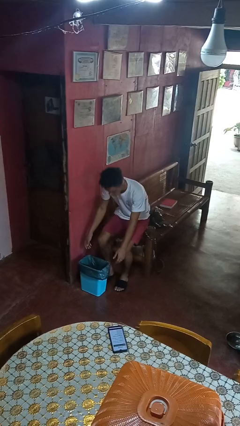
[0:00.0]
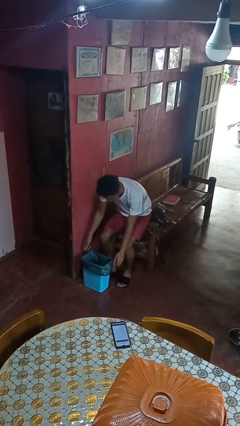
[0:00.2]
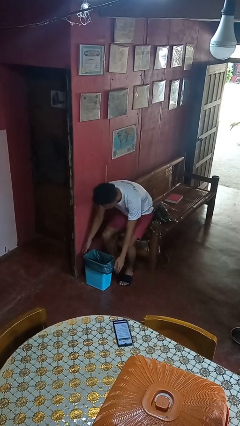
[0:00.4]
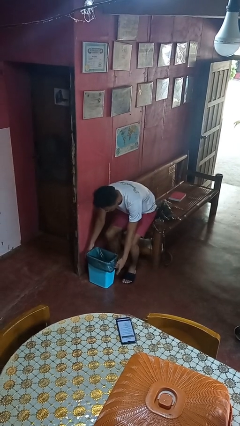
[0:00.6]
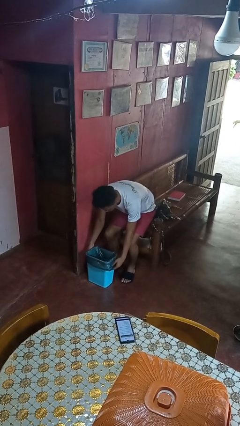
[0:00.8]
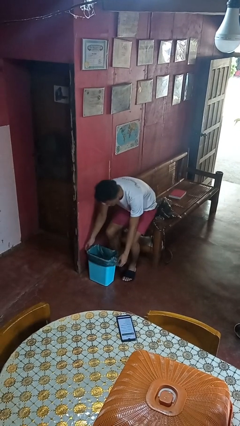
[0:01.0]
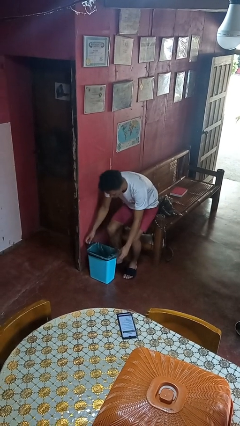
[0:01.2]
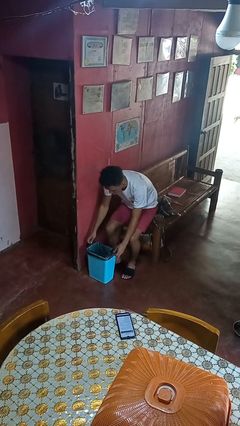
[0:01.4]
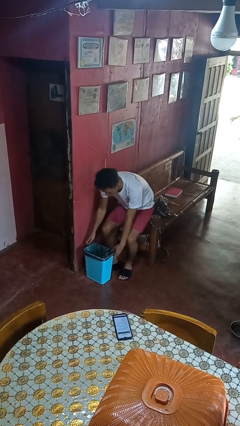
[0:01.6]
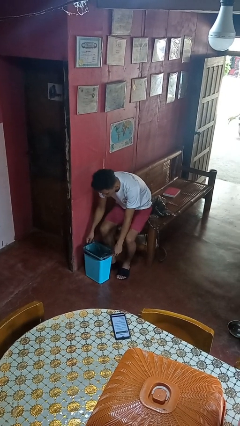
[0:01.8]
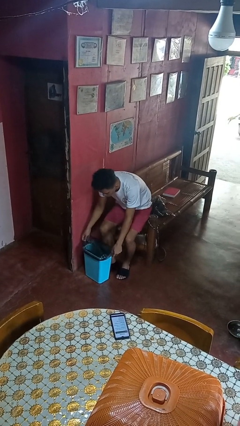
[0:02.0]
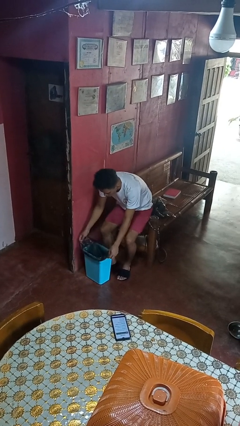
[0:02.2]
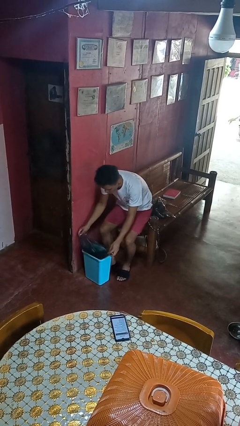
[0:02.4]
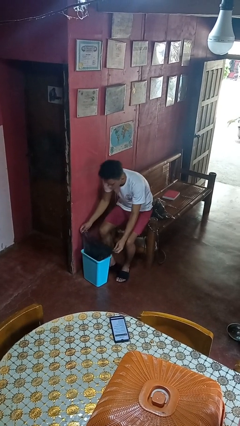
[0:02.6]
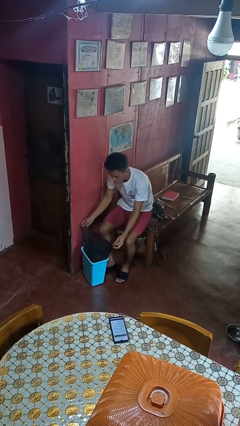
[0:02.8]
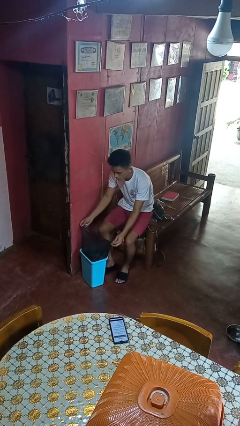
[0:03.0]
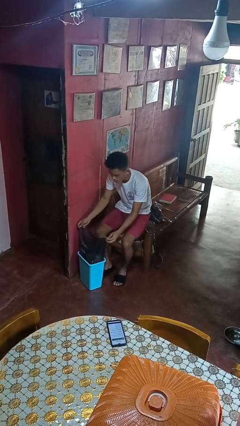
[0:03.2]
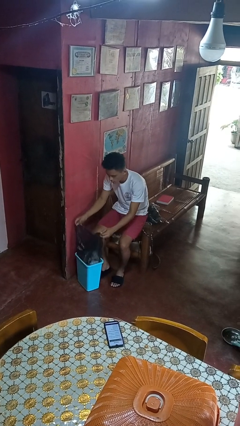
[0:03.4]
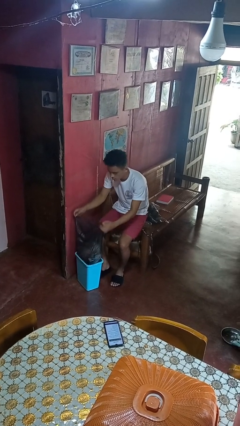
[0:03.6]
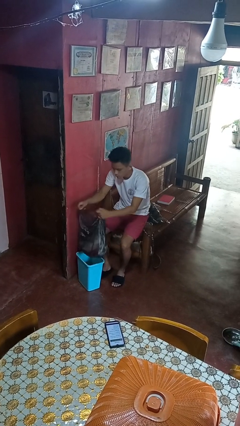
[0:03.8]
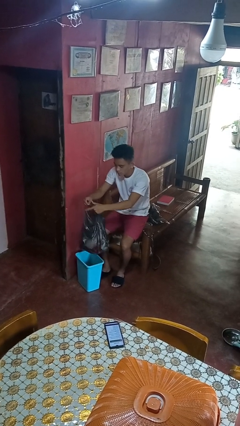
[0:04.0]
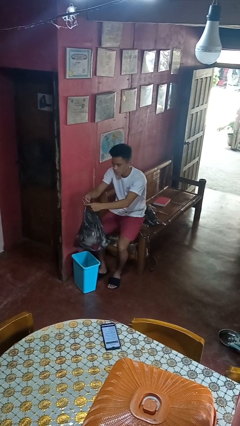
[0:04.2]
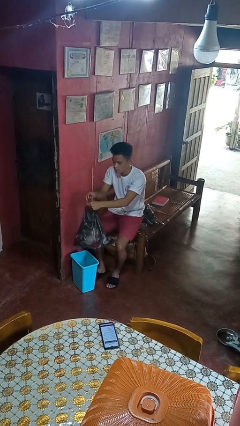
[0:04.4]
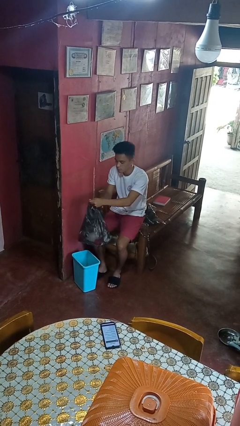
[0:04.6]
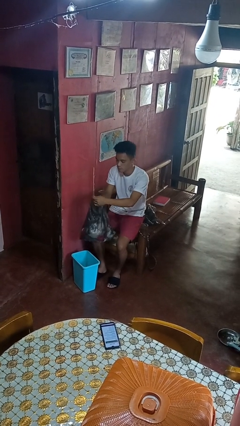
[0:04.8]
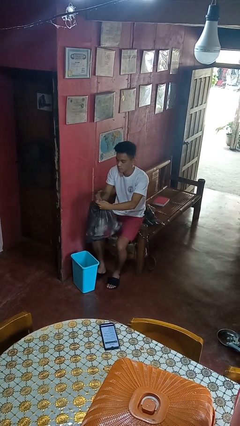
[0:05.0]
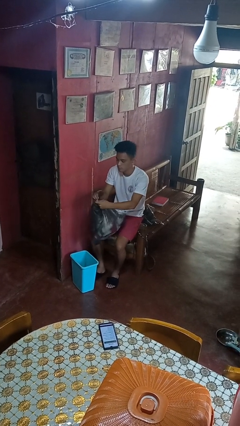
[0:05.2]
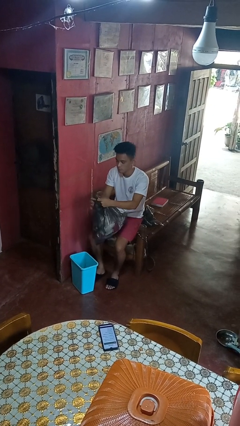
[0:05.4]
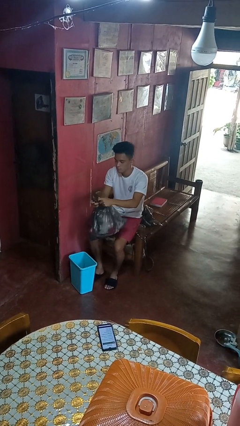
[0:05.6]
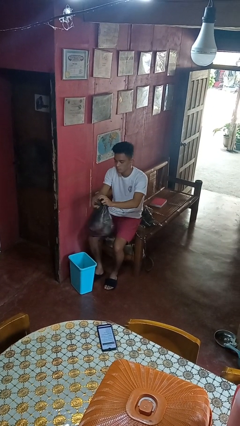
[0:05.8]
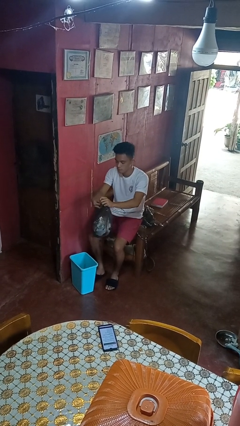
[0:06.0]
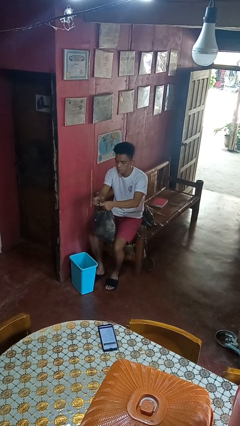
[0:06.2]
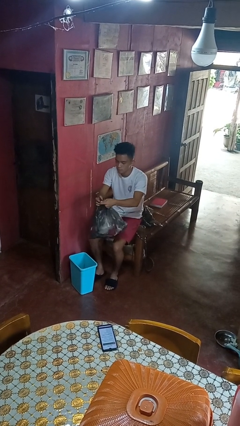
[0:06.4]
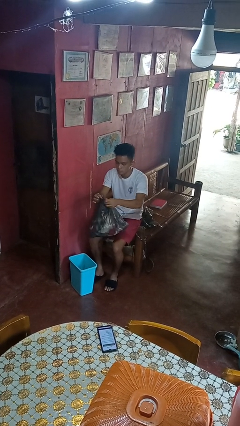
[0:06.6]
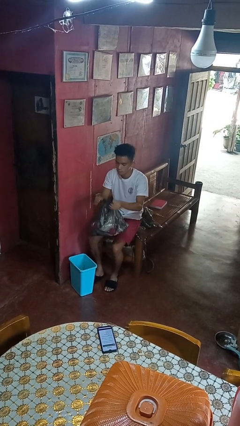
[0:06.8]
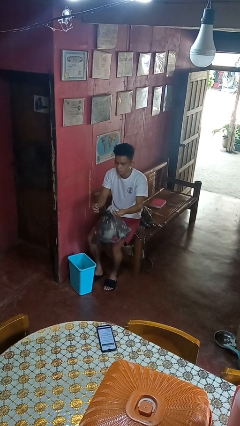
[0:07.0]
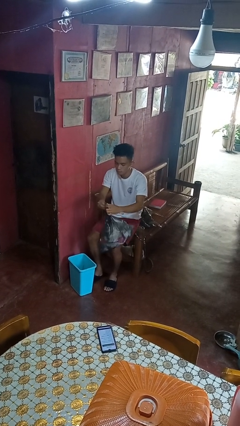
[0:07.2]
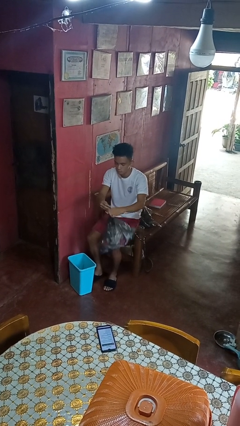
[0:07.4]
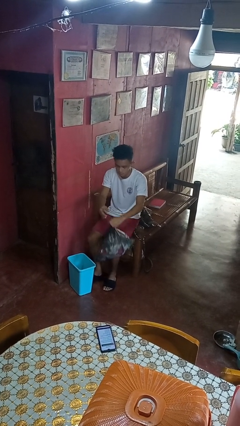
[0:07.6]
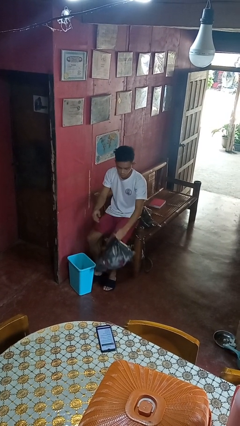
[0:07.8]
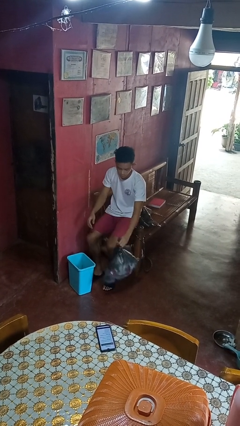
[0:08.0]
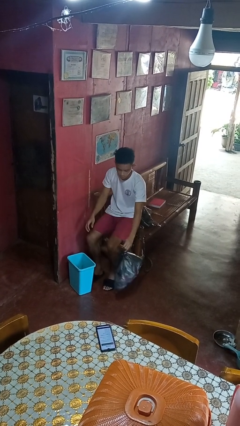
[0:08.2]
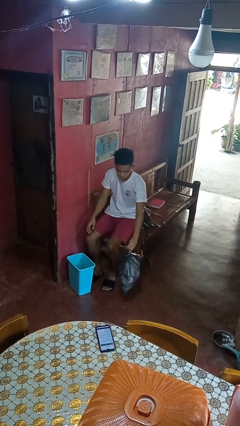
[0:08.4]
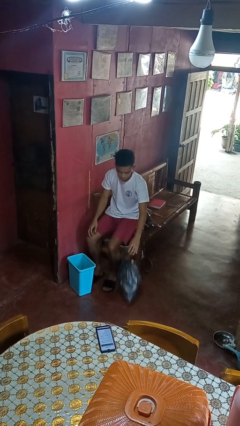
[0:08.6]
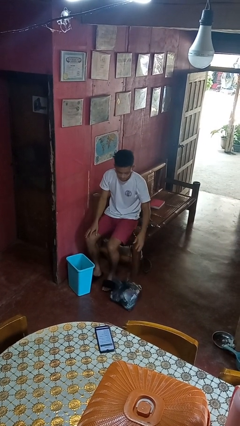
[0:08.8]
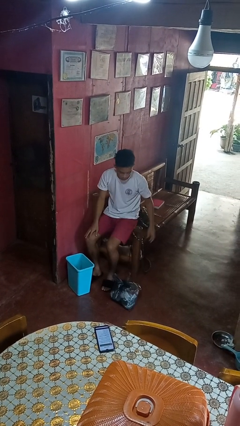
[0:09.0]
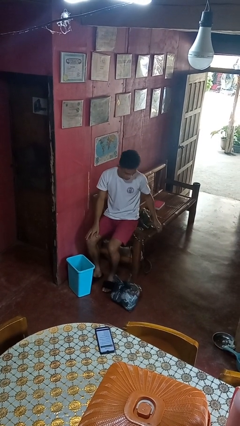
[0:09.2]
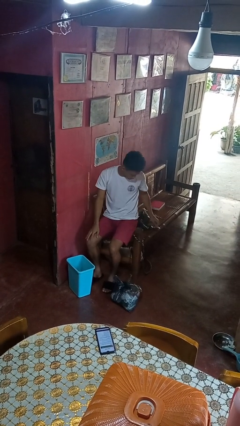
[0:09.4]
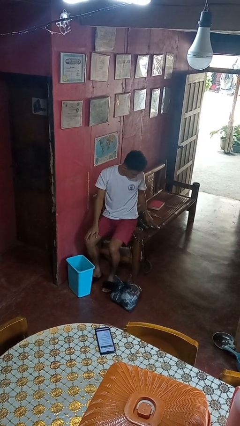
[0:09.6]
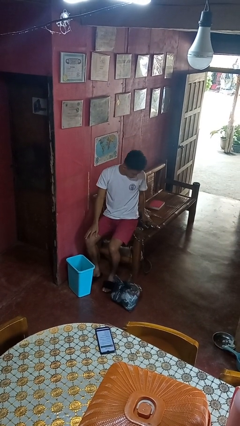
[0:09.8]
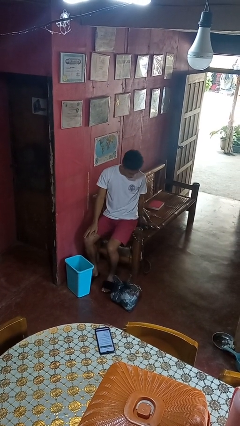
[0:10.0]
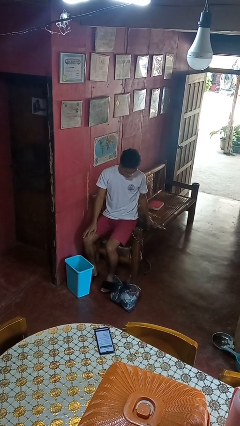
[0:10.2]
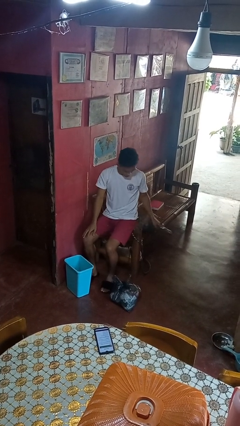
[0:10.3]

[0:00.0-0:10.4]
person removes trashbag from trashcan

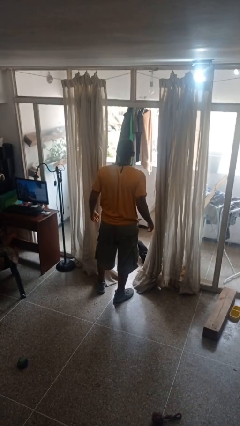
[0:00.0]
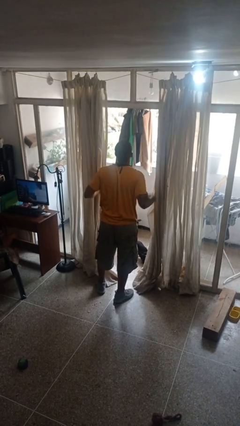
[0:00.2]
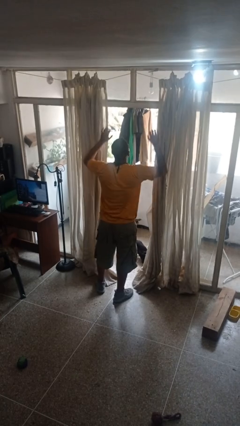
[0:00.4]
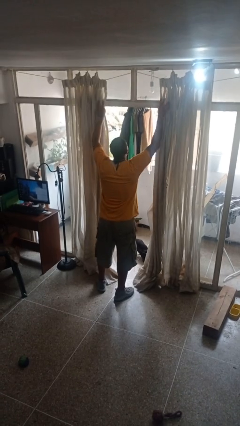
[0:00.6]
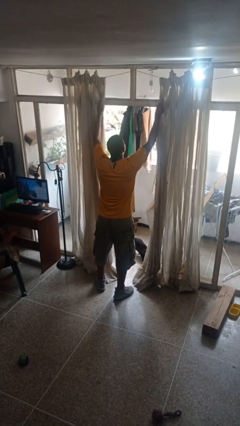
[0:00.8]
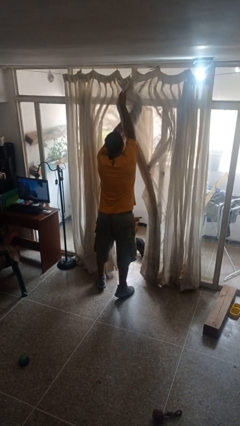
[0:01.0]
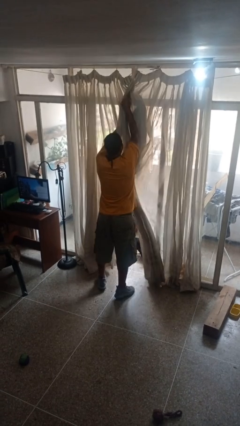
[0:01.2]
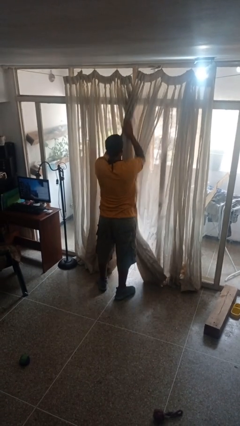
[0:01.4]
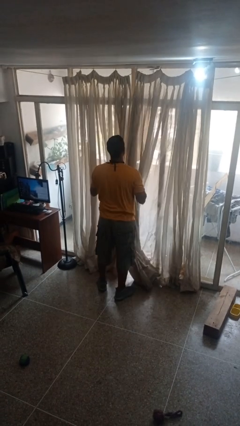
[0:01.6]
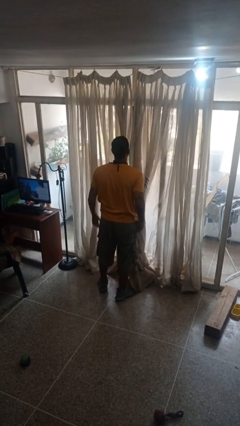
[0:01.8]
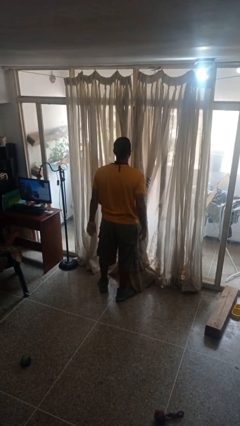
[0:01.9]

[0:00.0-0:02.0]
person closes curtains

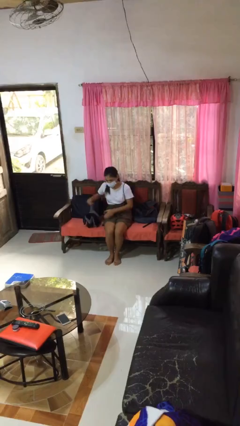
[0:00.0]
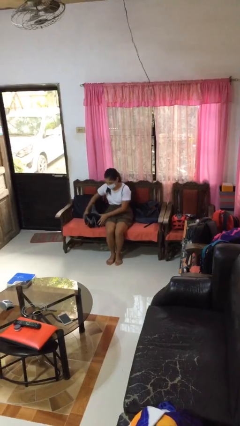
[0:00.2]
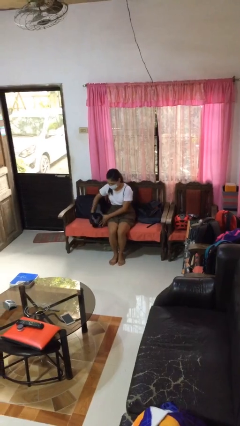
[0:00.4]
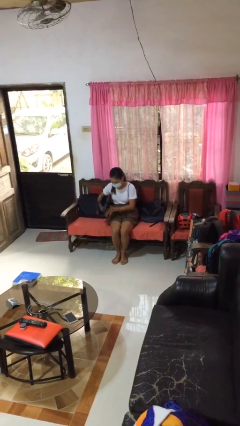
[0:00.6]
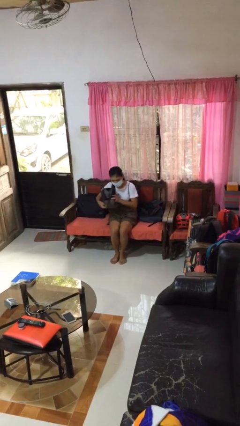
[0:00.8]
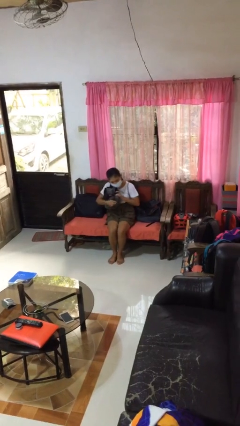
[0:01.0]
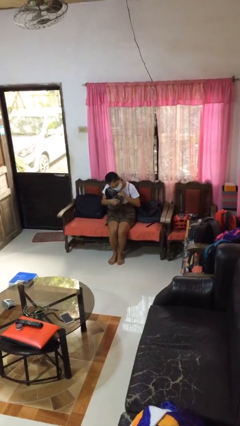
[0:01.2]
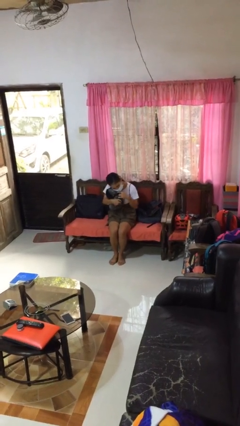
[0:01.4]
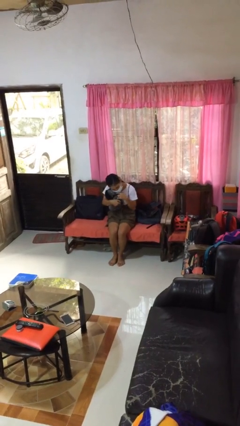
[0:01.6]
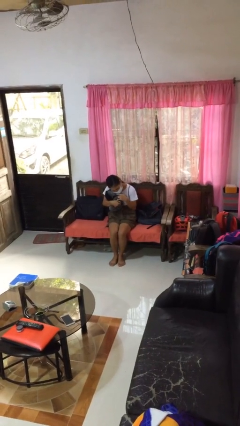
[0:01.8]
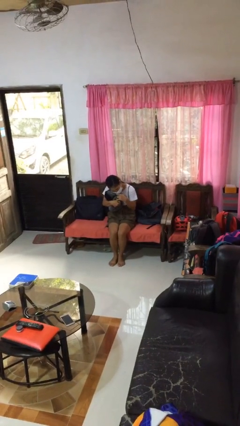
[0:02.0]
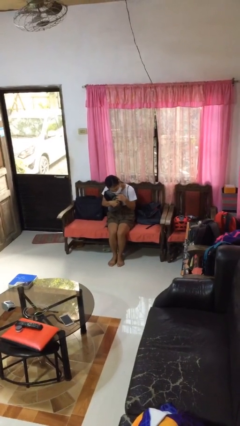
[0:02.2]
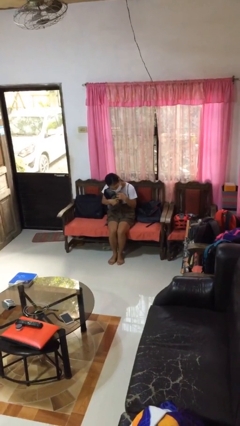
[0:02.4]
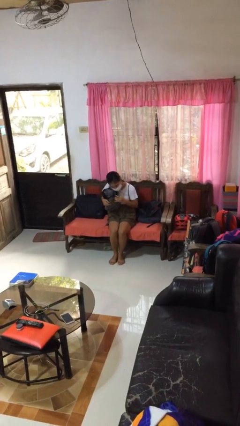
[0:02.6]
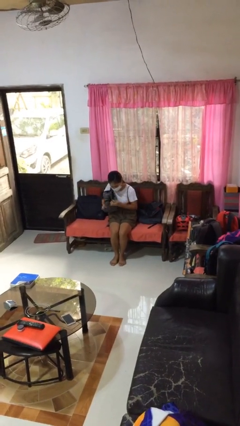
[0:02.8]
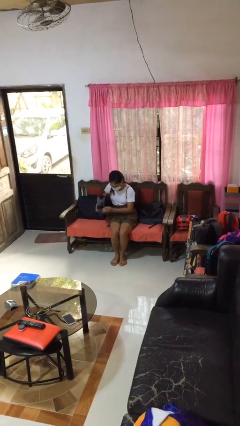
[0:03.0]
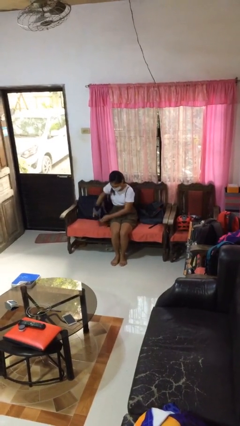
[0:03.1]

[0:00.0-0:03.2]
person hugs stuffed animal

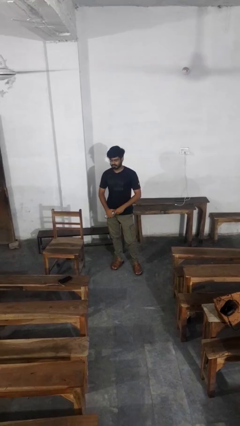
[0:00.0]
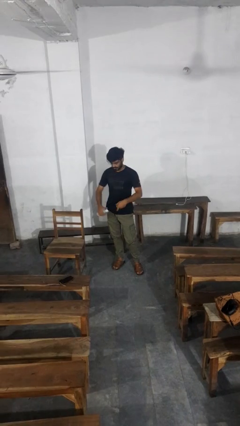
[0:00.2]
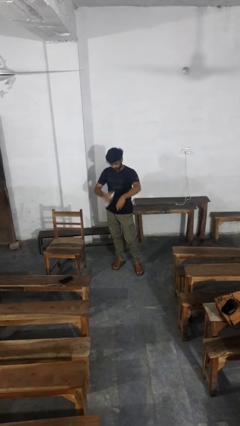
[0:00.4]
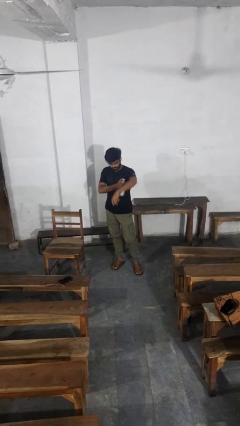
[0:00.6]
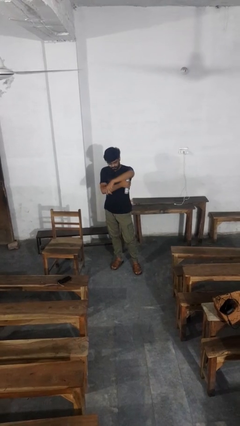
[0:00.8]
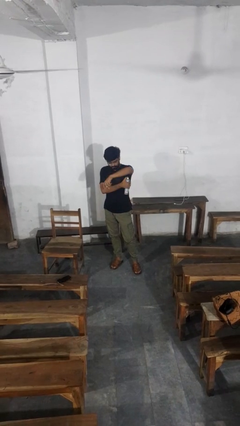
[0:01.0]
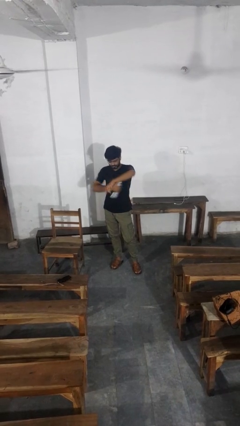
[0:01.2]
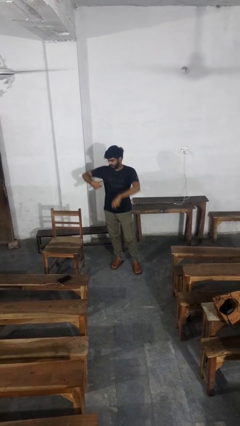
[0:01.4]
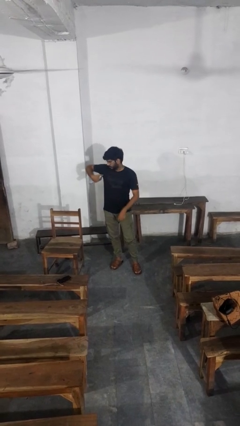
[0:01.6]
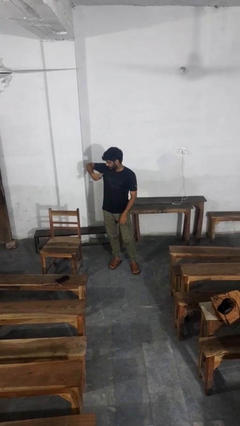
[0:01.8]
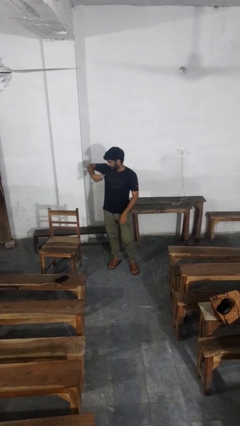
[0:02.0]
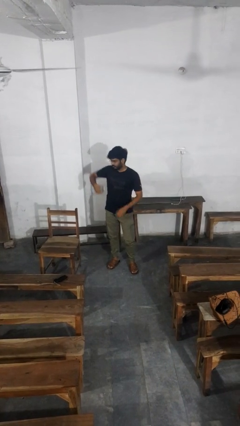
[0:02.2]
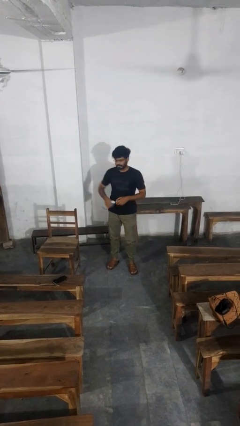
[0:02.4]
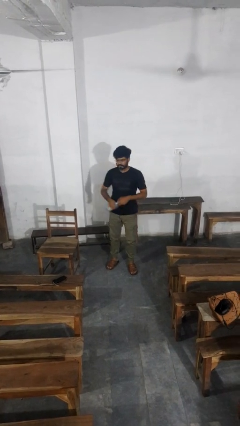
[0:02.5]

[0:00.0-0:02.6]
person applies deodorant
